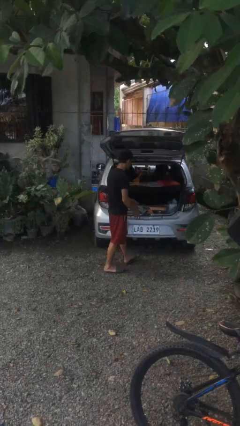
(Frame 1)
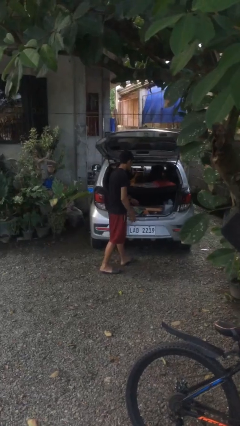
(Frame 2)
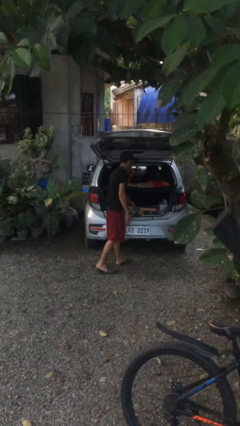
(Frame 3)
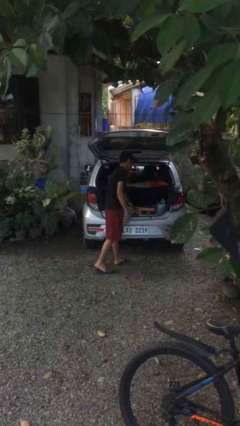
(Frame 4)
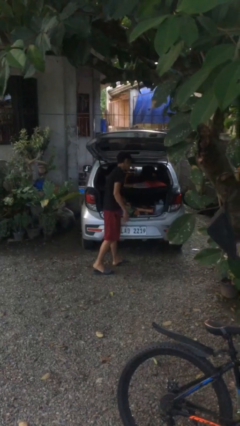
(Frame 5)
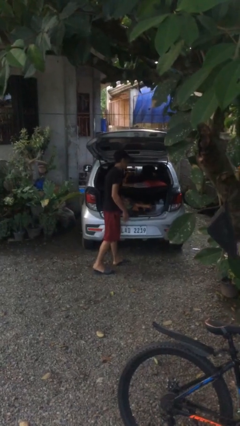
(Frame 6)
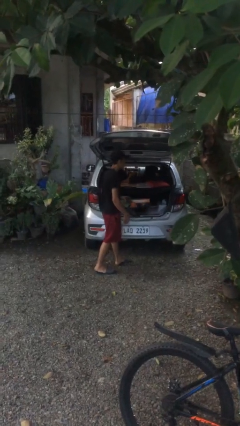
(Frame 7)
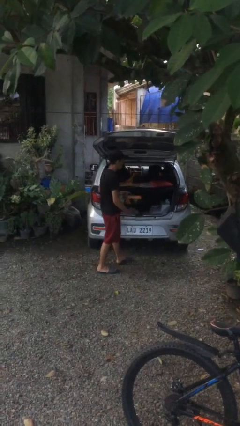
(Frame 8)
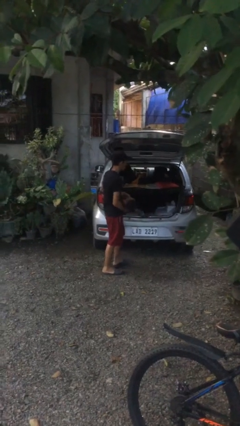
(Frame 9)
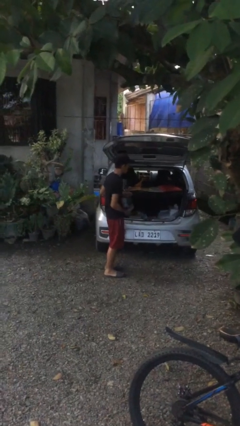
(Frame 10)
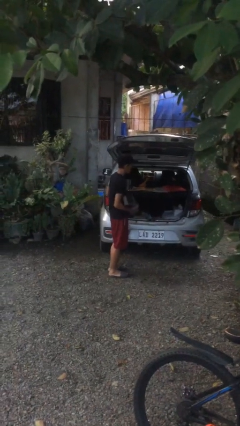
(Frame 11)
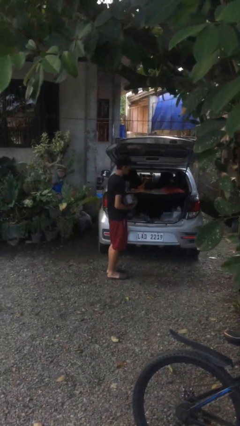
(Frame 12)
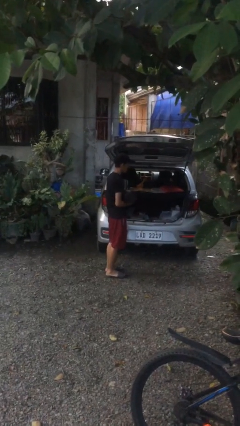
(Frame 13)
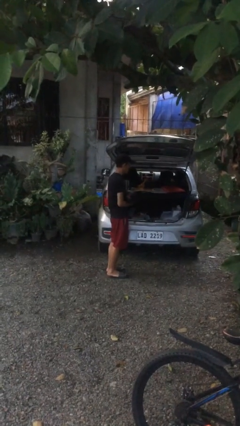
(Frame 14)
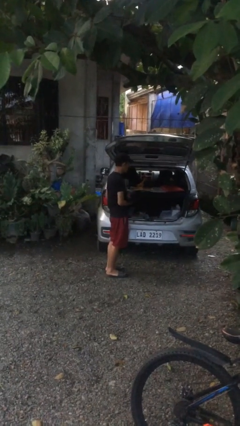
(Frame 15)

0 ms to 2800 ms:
person unloads car

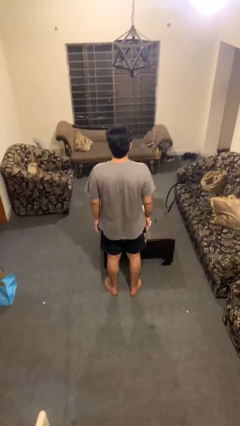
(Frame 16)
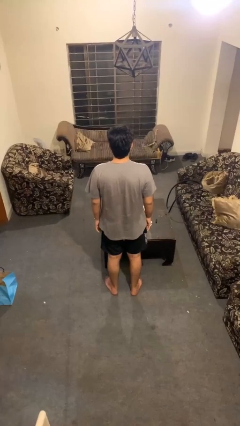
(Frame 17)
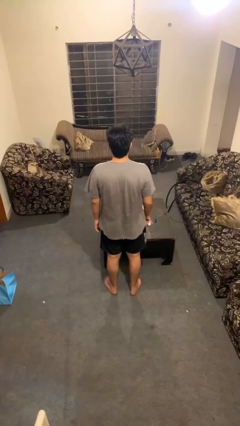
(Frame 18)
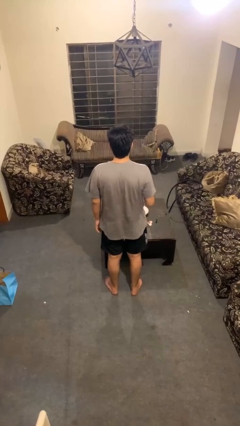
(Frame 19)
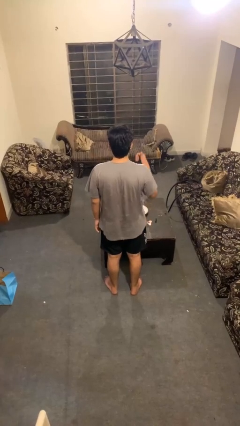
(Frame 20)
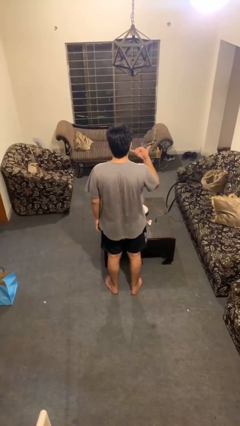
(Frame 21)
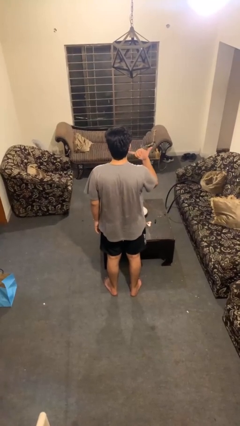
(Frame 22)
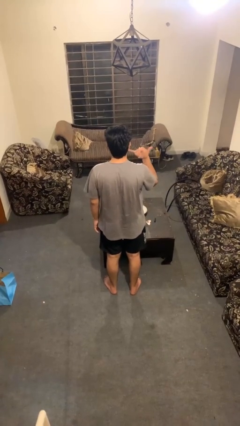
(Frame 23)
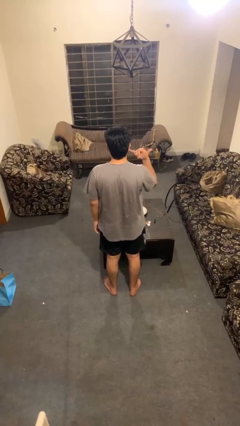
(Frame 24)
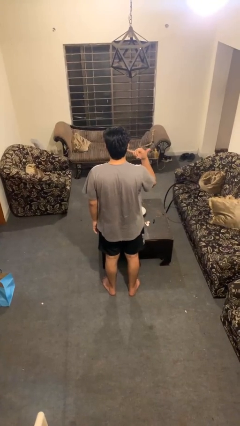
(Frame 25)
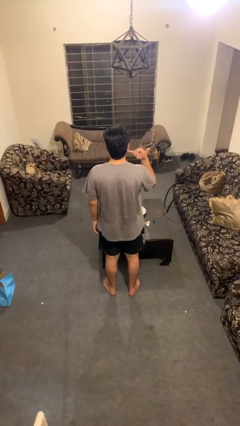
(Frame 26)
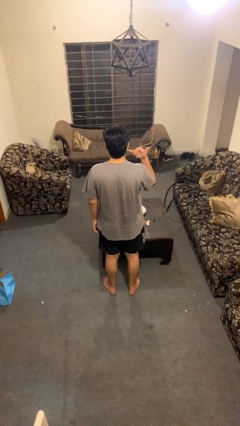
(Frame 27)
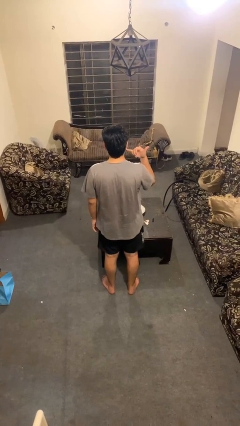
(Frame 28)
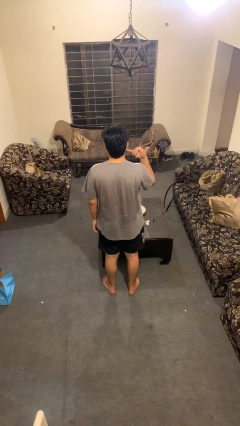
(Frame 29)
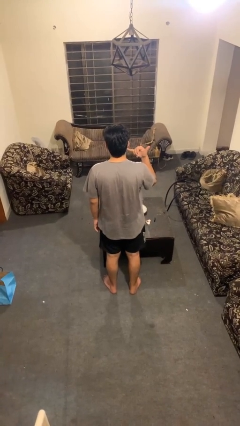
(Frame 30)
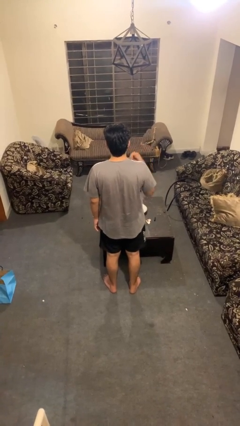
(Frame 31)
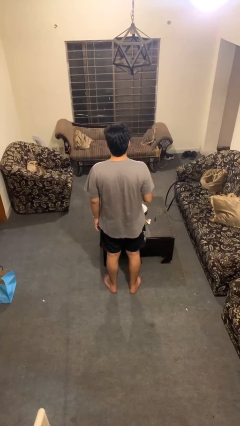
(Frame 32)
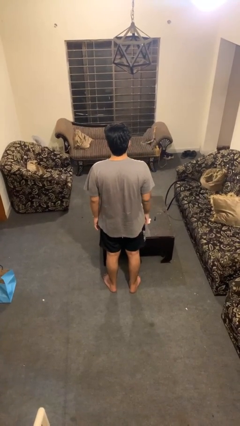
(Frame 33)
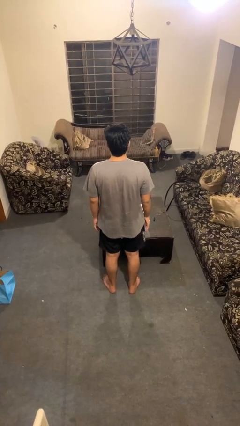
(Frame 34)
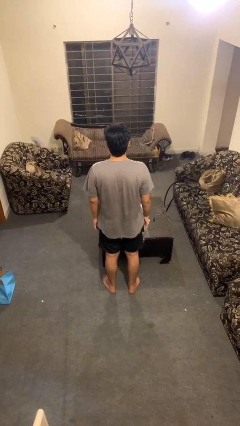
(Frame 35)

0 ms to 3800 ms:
person gestures hang loose

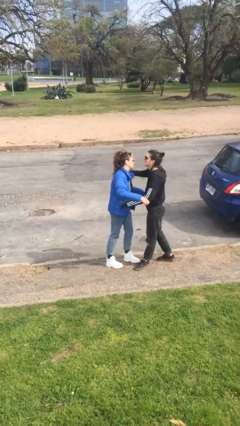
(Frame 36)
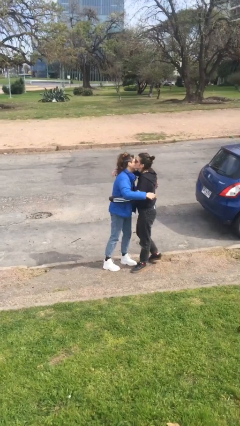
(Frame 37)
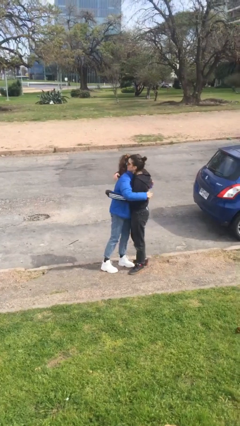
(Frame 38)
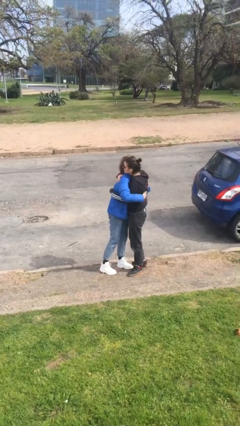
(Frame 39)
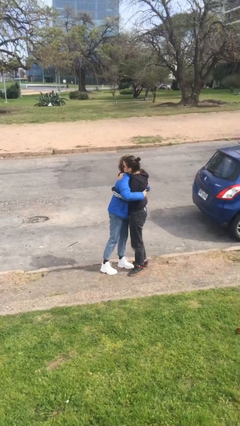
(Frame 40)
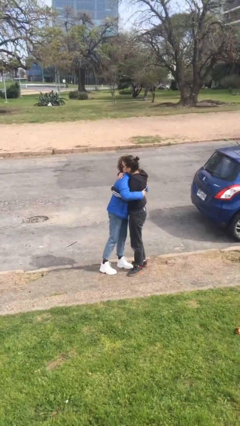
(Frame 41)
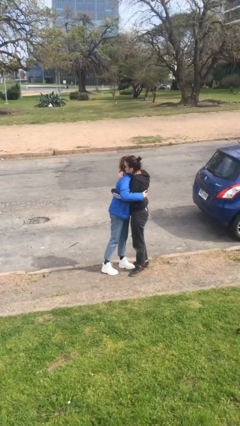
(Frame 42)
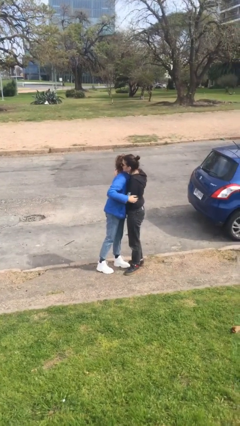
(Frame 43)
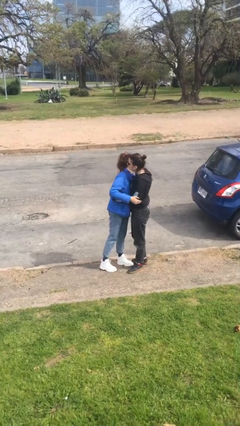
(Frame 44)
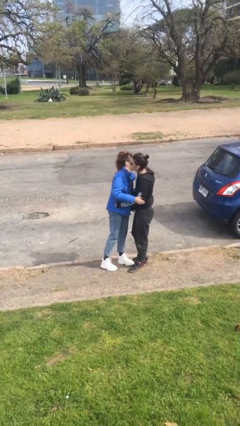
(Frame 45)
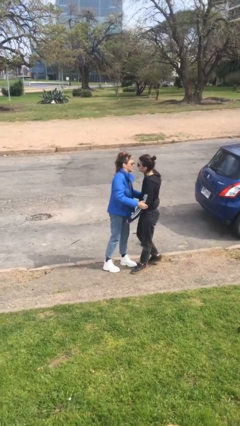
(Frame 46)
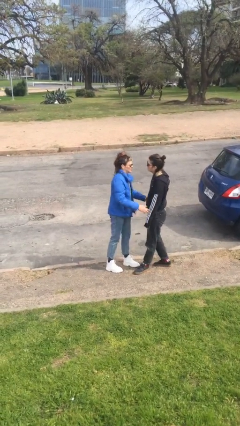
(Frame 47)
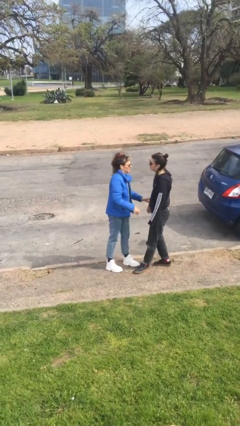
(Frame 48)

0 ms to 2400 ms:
person embraces person

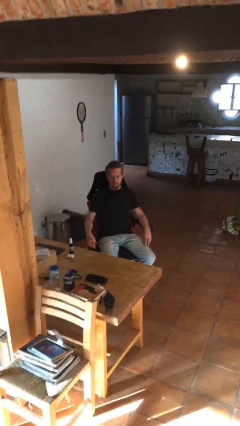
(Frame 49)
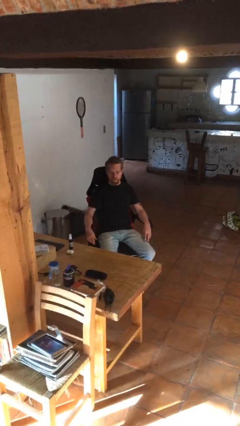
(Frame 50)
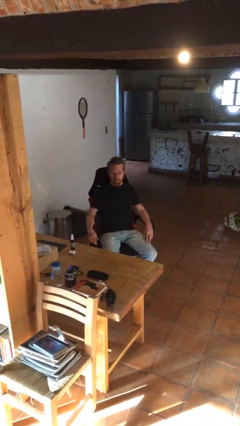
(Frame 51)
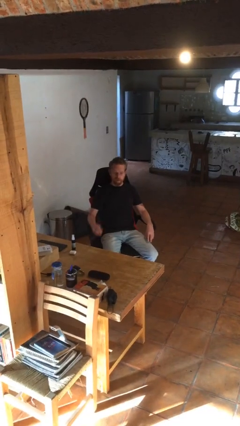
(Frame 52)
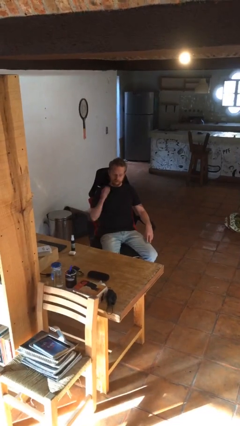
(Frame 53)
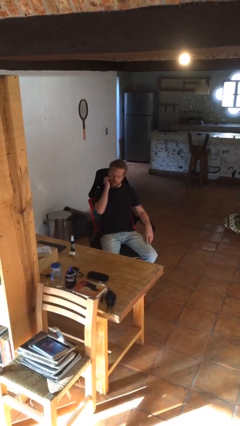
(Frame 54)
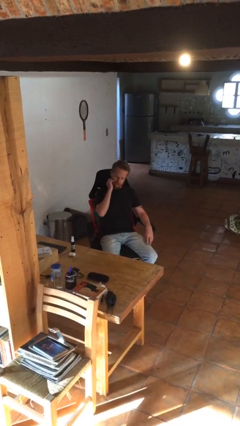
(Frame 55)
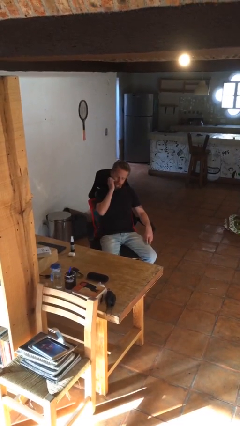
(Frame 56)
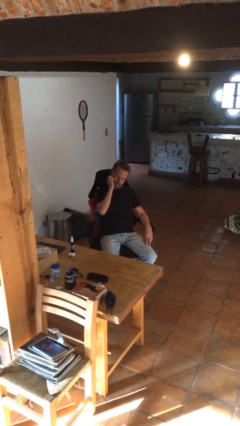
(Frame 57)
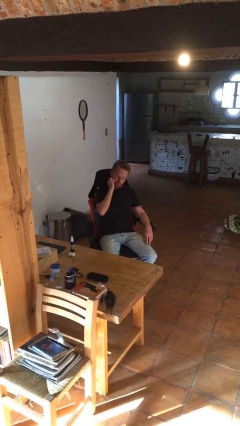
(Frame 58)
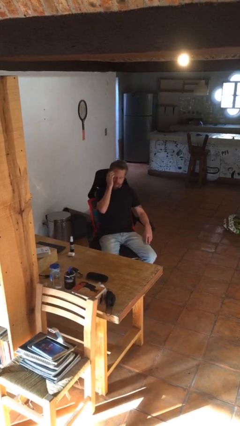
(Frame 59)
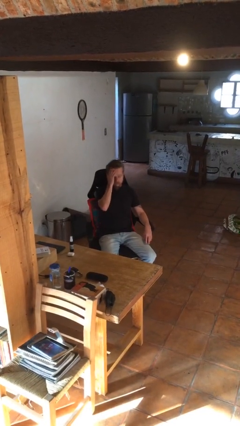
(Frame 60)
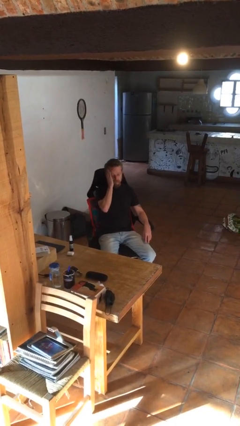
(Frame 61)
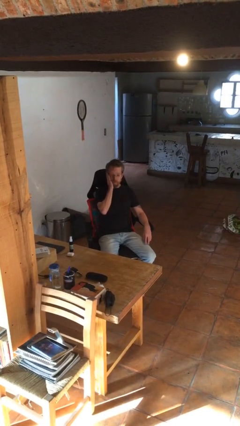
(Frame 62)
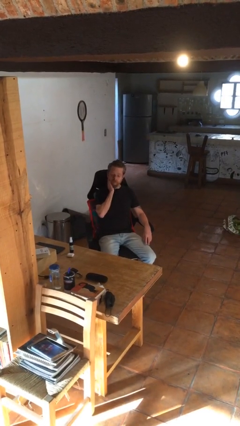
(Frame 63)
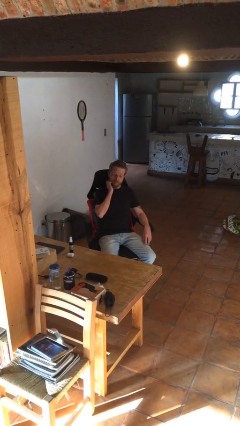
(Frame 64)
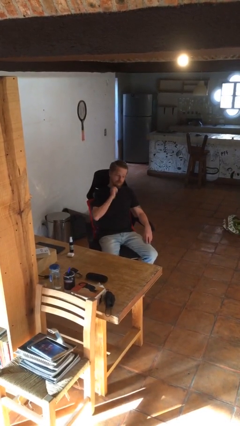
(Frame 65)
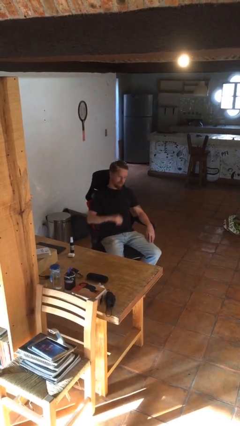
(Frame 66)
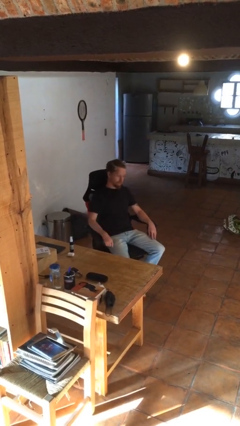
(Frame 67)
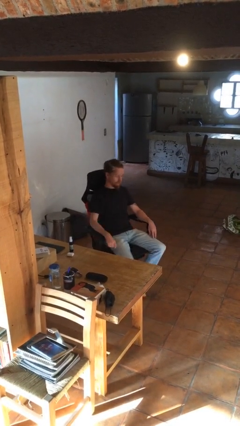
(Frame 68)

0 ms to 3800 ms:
person scratches face

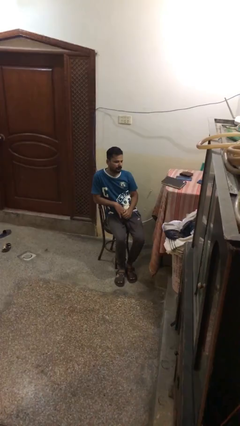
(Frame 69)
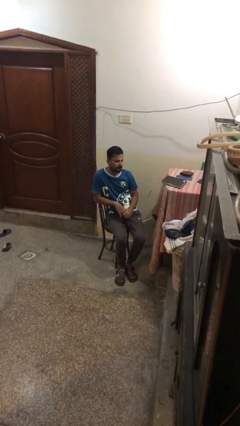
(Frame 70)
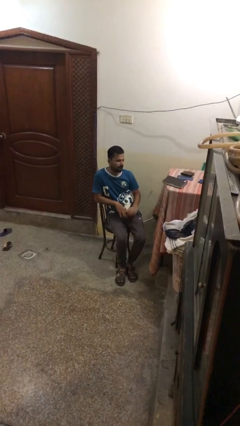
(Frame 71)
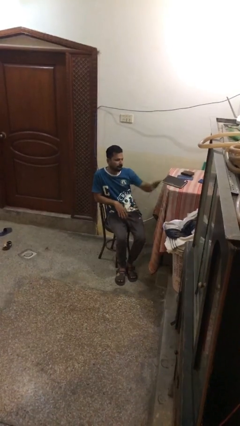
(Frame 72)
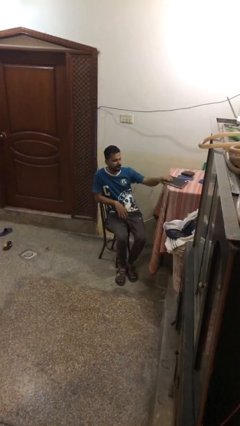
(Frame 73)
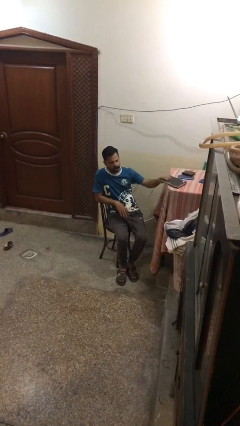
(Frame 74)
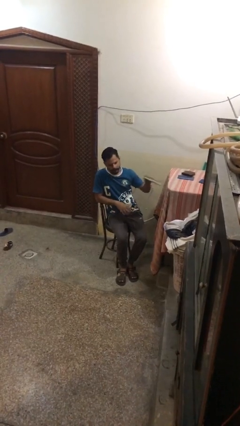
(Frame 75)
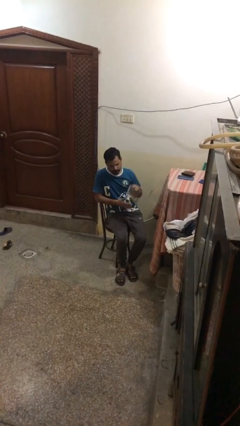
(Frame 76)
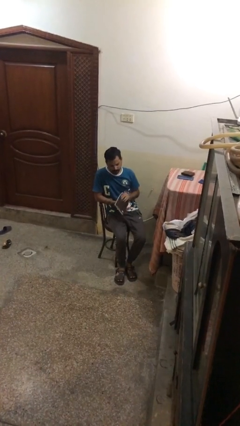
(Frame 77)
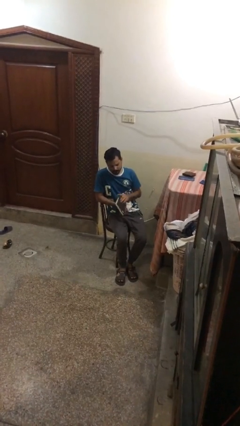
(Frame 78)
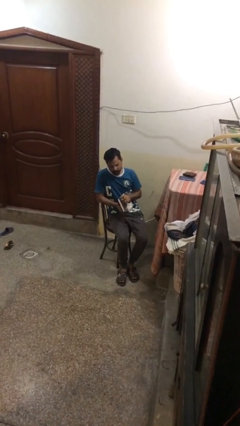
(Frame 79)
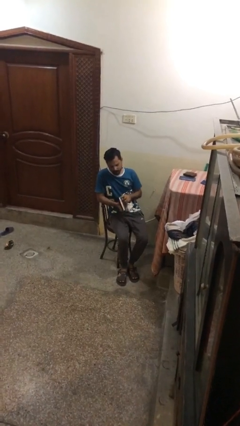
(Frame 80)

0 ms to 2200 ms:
person picks up object from table

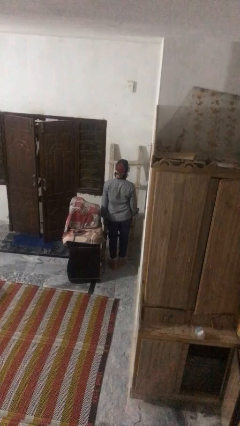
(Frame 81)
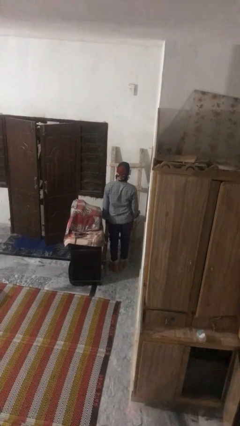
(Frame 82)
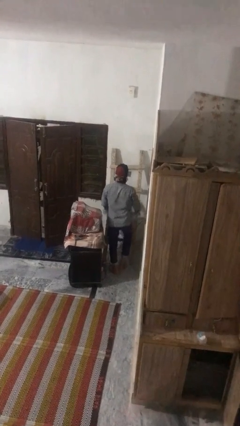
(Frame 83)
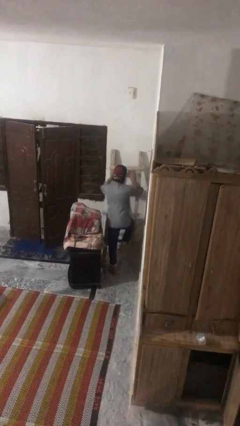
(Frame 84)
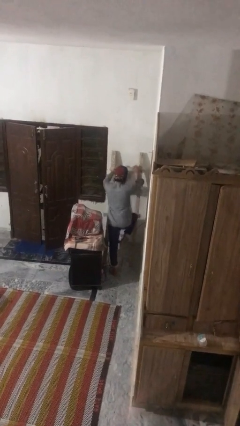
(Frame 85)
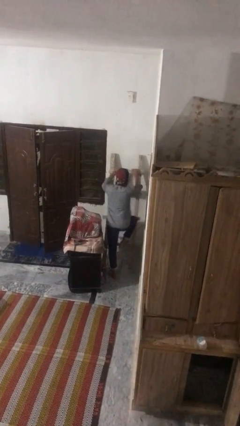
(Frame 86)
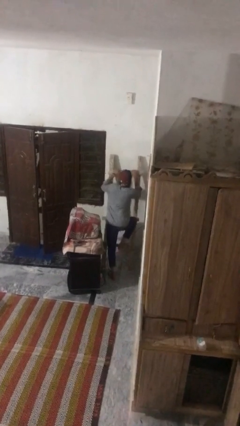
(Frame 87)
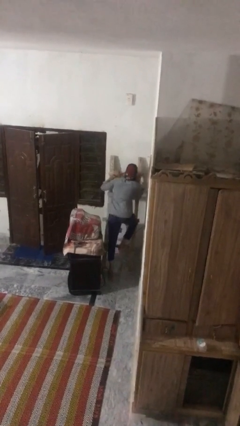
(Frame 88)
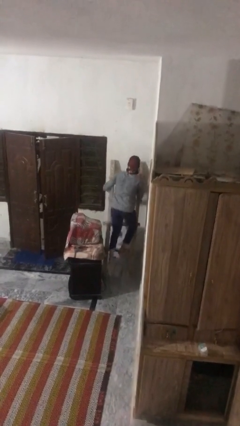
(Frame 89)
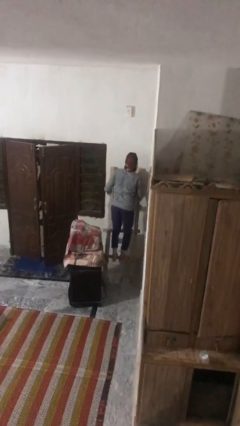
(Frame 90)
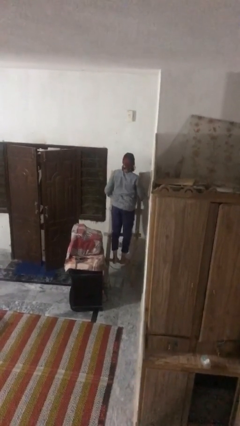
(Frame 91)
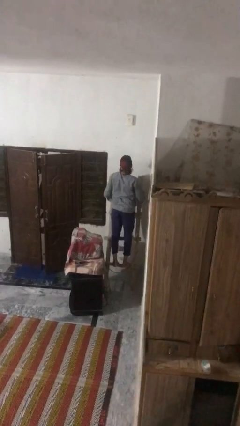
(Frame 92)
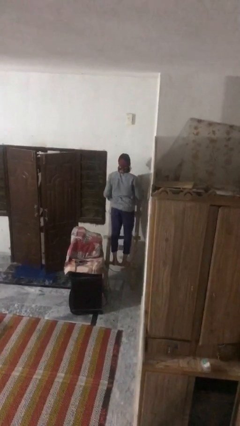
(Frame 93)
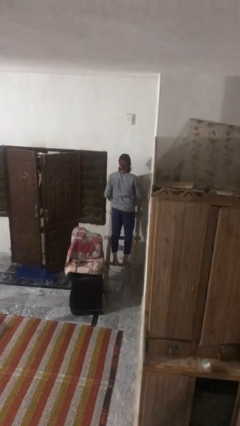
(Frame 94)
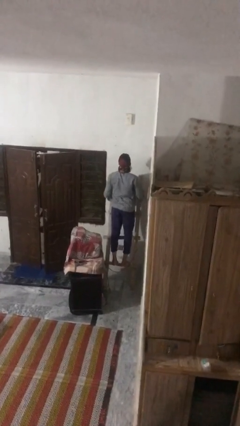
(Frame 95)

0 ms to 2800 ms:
person climbs up ladder
